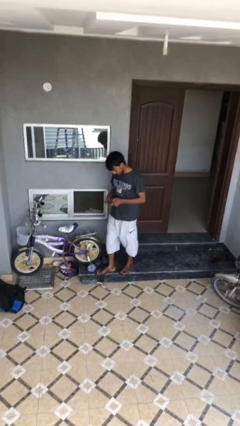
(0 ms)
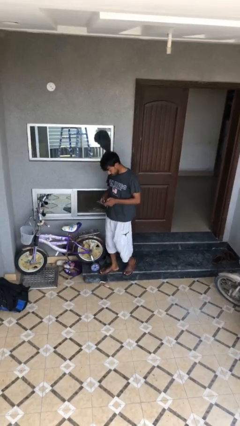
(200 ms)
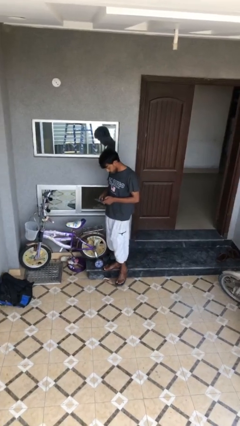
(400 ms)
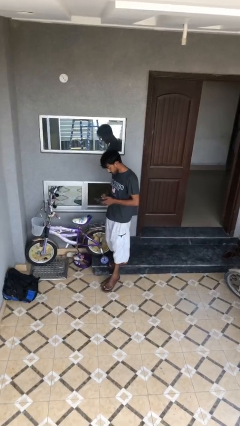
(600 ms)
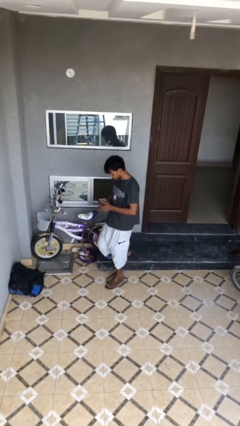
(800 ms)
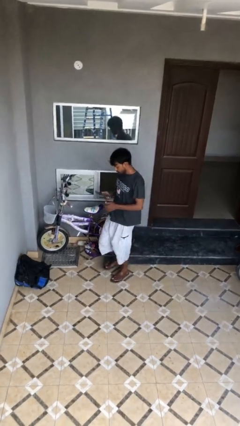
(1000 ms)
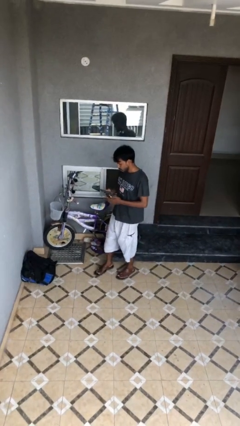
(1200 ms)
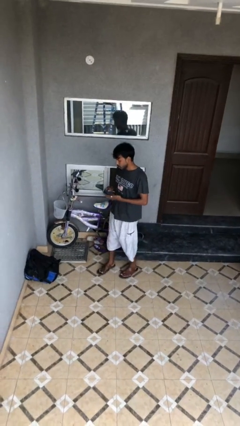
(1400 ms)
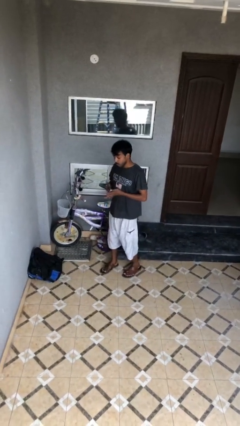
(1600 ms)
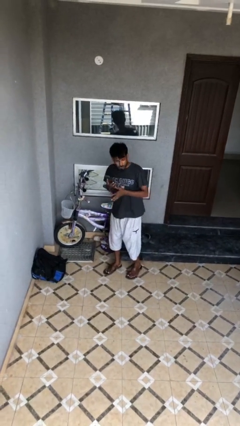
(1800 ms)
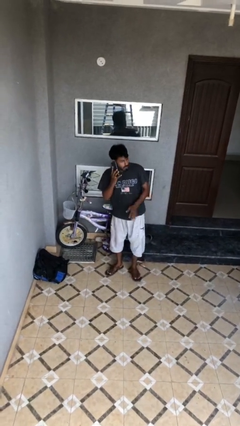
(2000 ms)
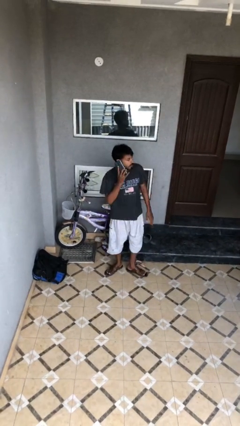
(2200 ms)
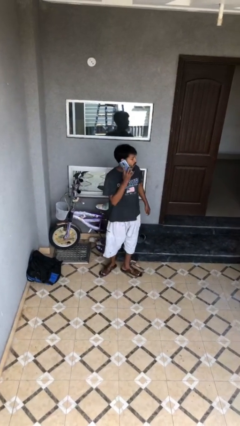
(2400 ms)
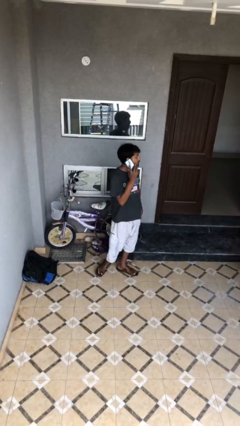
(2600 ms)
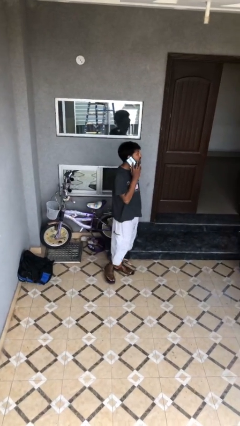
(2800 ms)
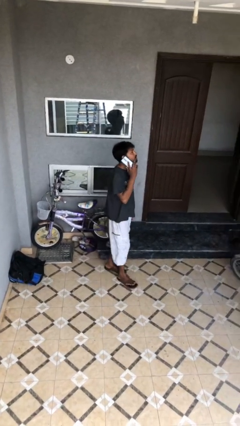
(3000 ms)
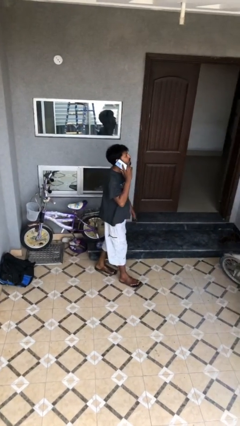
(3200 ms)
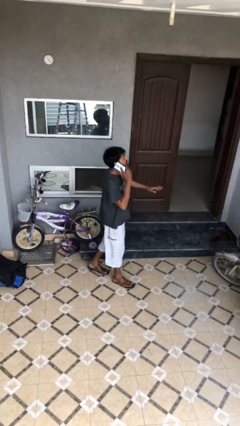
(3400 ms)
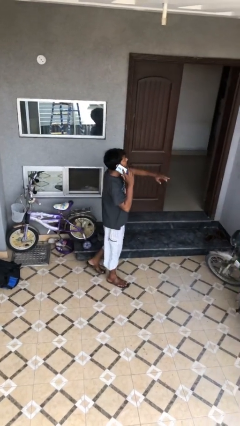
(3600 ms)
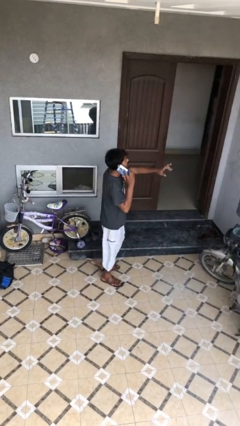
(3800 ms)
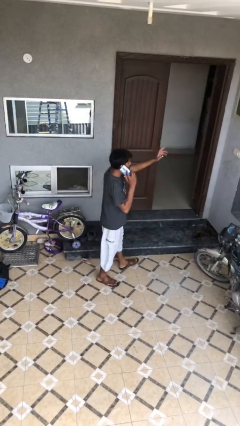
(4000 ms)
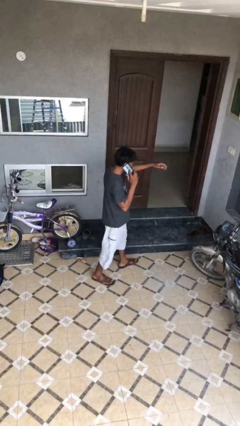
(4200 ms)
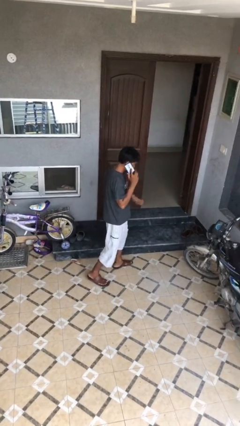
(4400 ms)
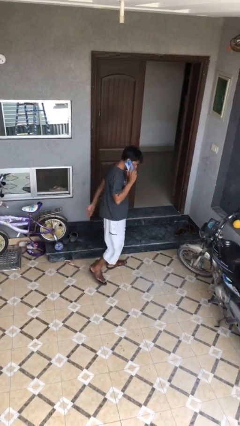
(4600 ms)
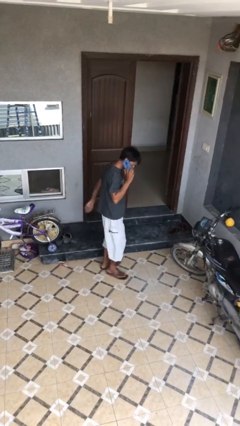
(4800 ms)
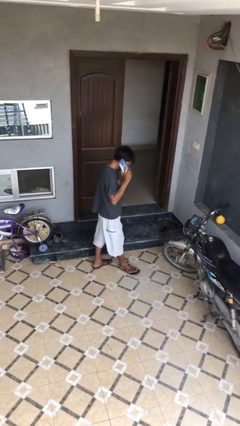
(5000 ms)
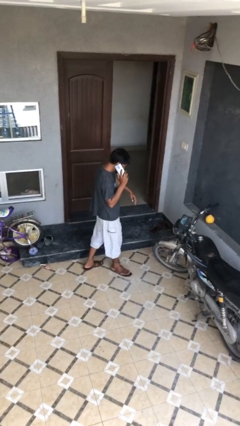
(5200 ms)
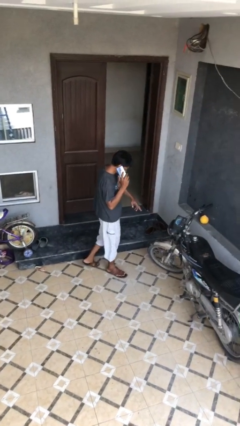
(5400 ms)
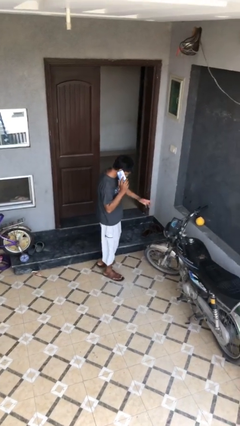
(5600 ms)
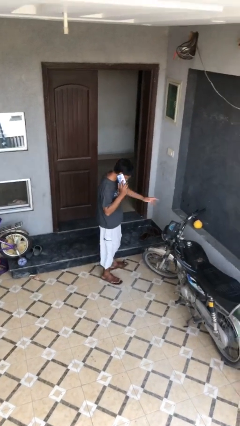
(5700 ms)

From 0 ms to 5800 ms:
person talks on phone

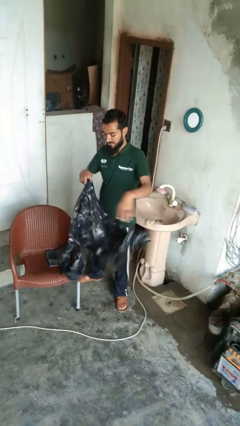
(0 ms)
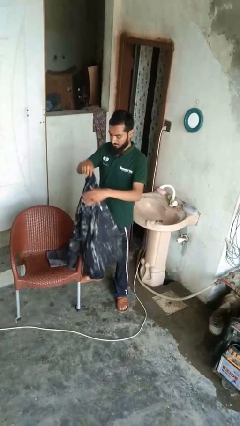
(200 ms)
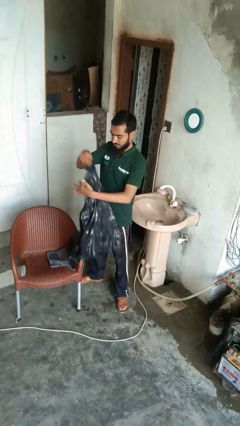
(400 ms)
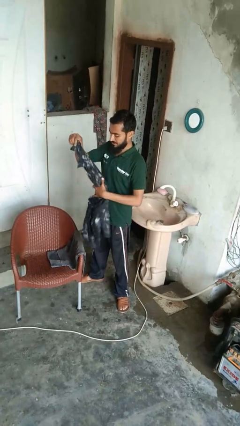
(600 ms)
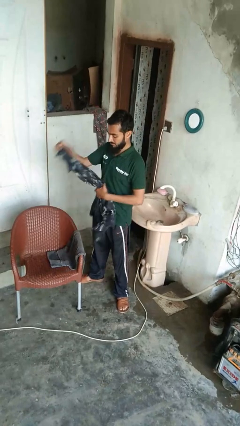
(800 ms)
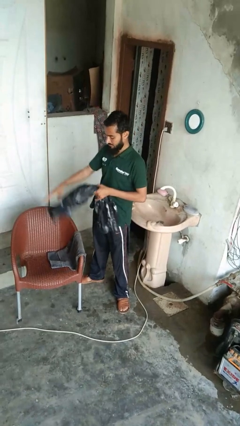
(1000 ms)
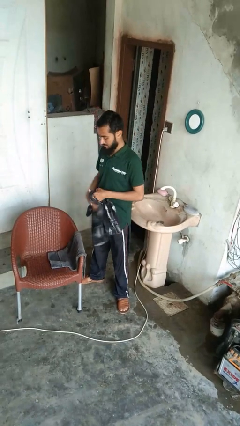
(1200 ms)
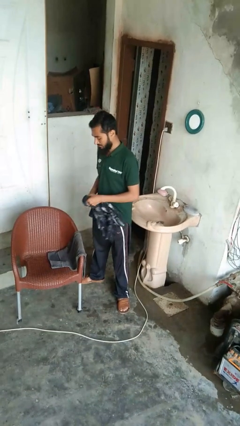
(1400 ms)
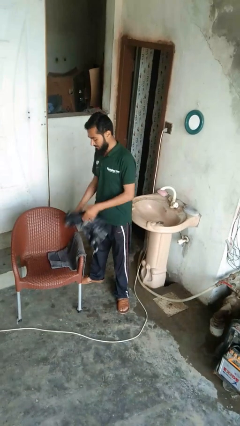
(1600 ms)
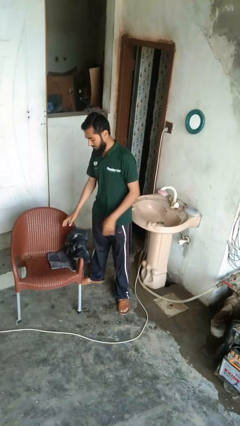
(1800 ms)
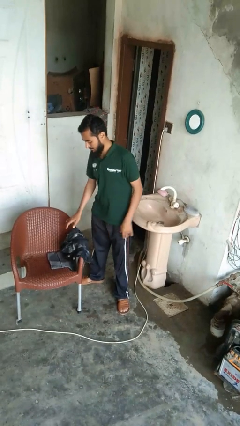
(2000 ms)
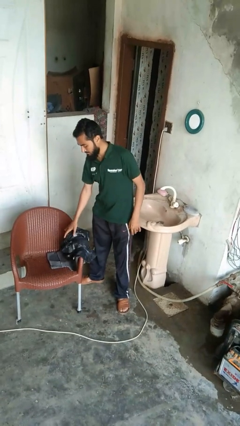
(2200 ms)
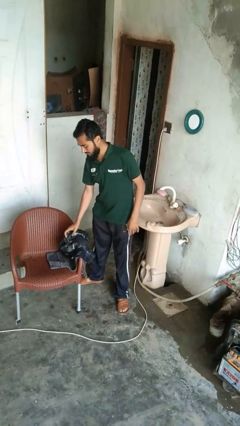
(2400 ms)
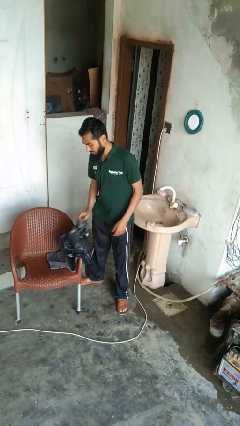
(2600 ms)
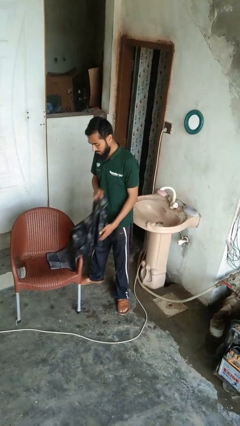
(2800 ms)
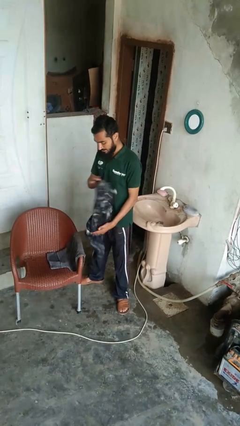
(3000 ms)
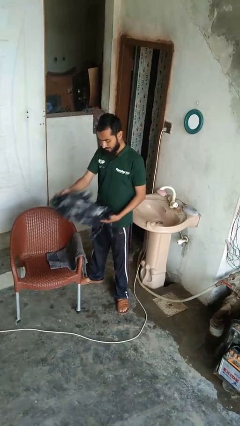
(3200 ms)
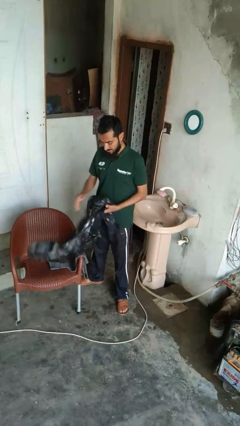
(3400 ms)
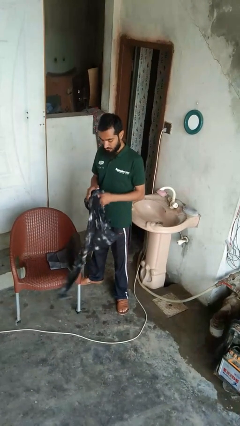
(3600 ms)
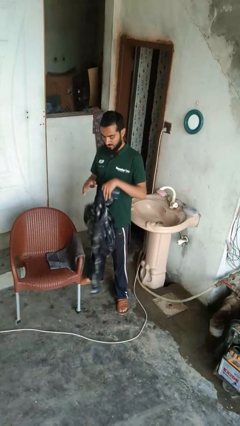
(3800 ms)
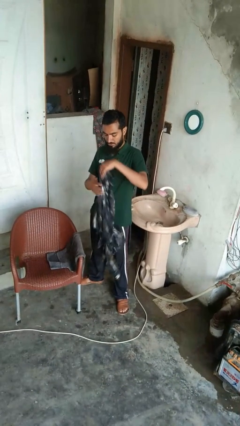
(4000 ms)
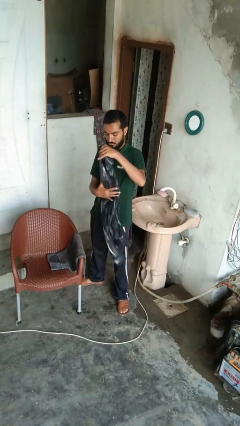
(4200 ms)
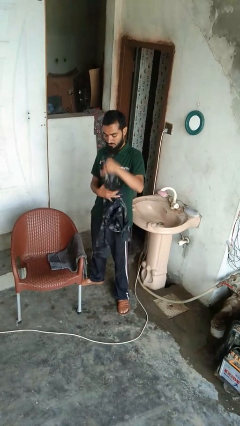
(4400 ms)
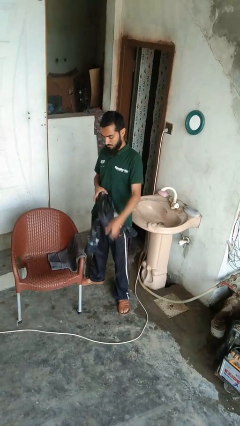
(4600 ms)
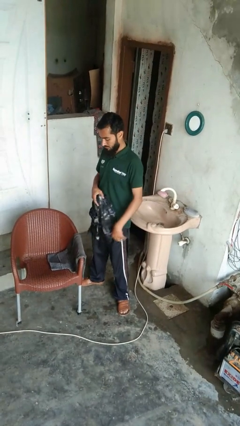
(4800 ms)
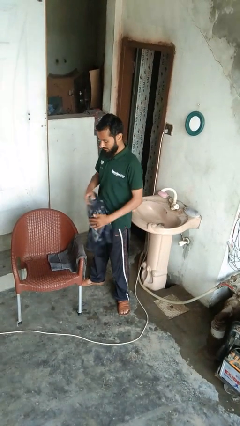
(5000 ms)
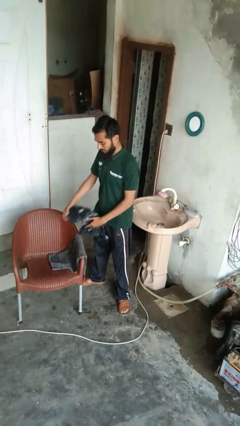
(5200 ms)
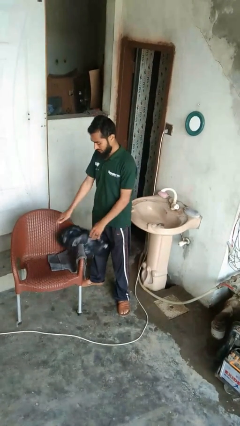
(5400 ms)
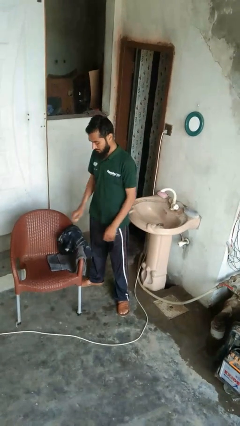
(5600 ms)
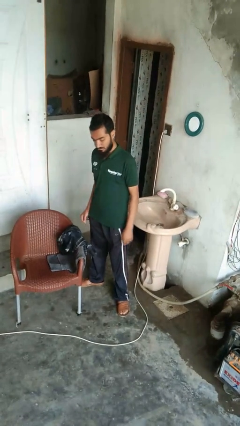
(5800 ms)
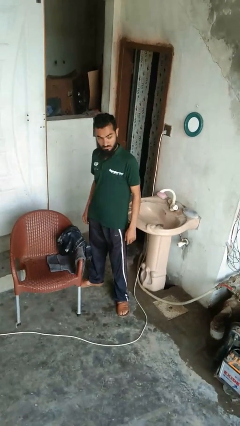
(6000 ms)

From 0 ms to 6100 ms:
person folds shirt

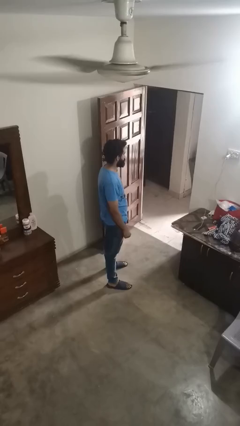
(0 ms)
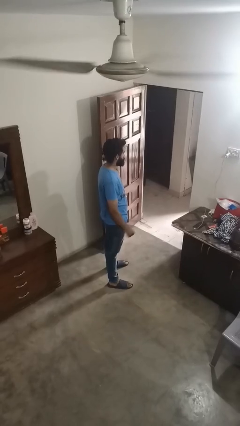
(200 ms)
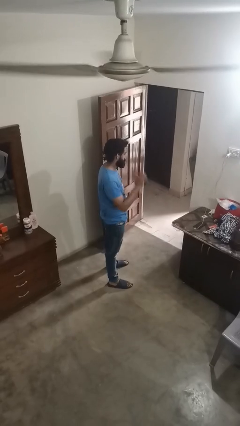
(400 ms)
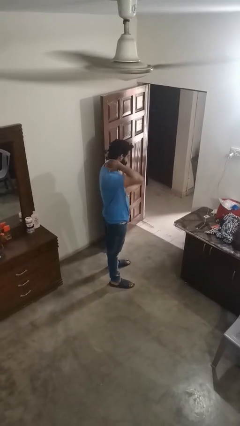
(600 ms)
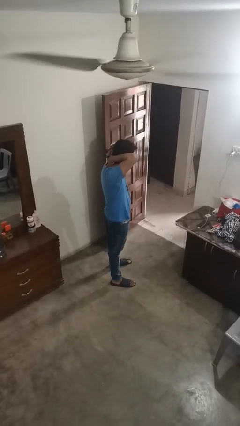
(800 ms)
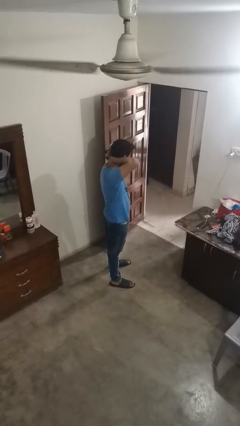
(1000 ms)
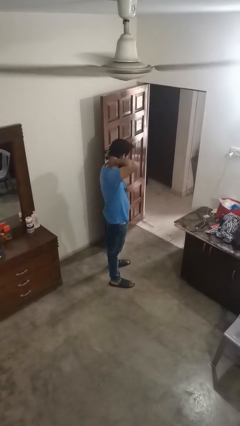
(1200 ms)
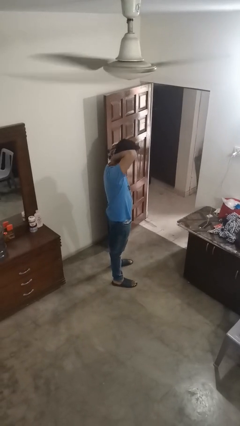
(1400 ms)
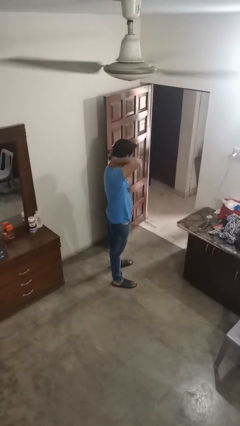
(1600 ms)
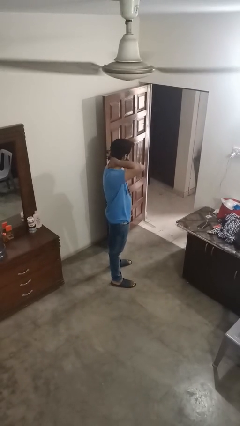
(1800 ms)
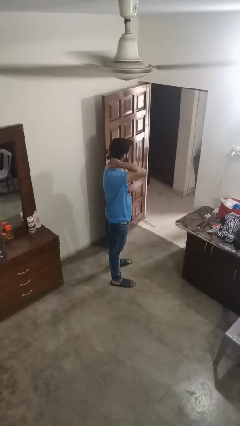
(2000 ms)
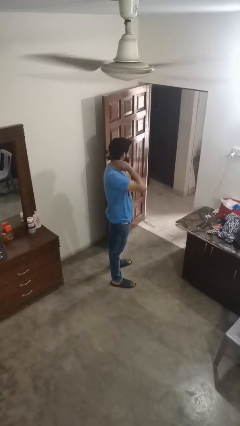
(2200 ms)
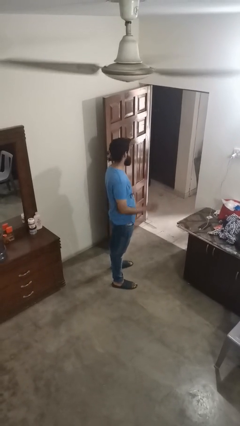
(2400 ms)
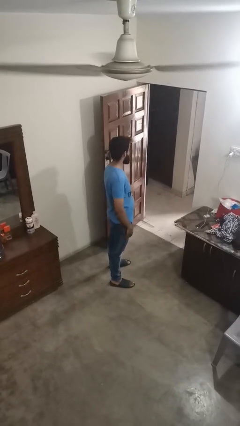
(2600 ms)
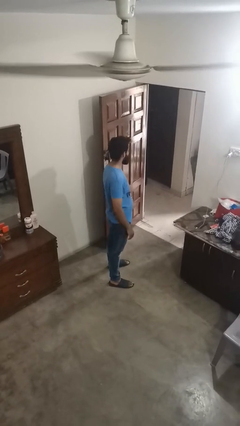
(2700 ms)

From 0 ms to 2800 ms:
person rubs neck

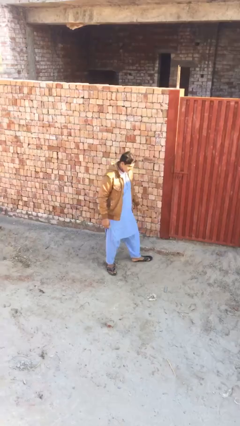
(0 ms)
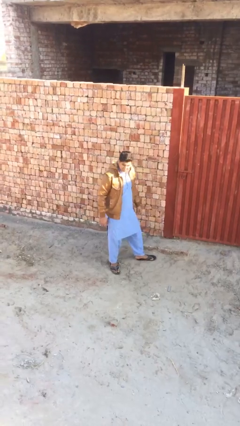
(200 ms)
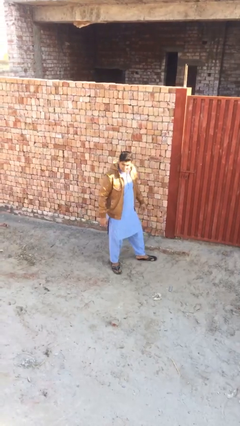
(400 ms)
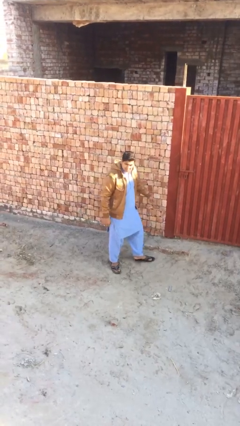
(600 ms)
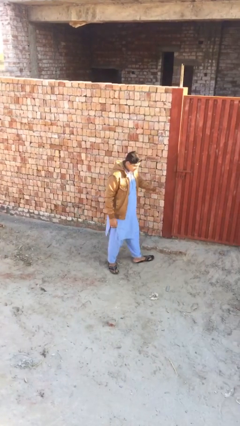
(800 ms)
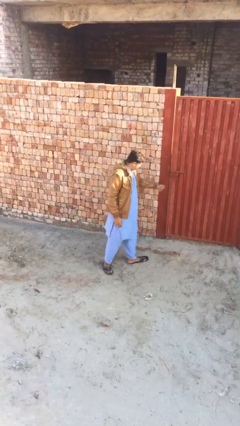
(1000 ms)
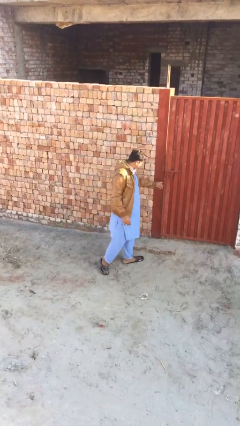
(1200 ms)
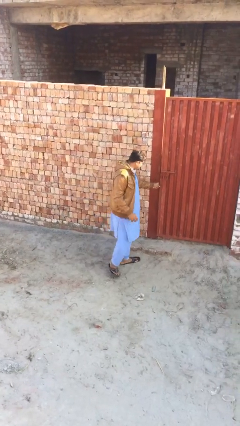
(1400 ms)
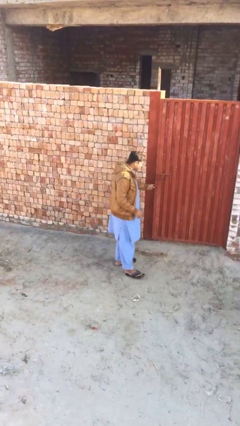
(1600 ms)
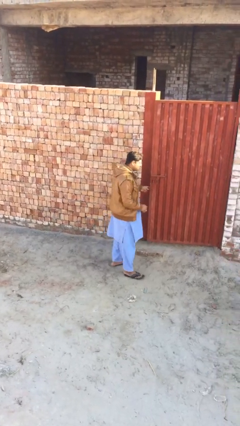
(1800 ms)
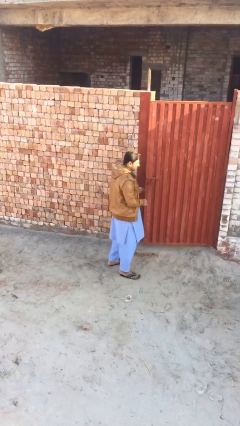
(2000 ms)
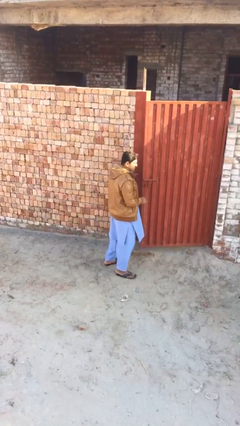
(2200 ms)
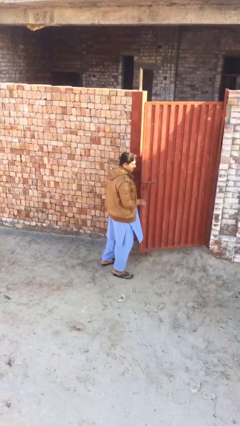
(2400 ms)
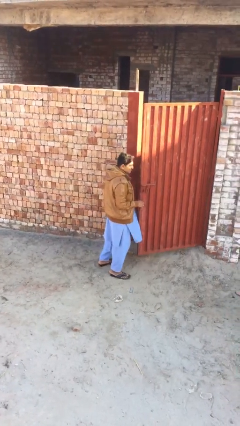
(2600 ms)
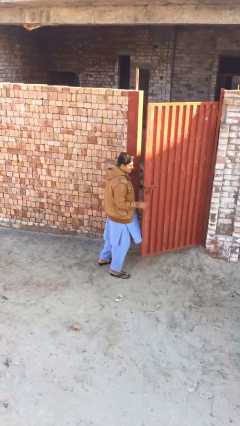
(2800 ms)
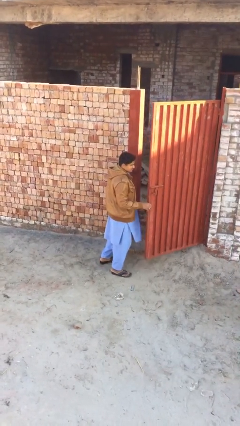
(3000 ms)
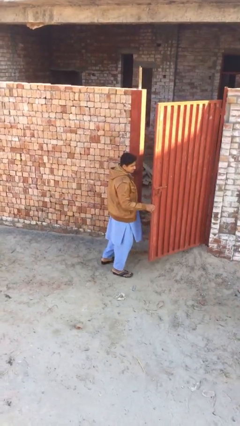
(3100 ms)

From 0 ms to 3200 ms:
person opens facility door
